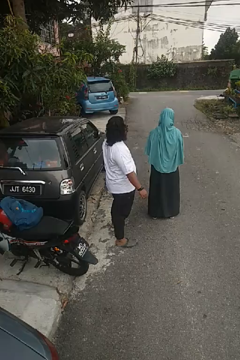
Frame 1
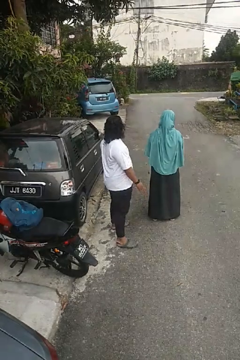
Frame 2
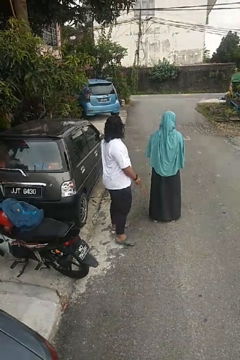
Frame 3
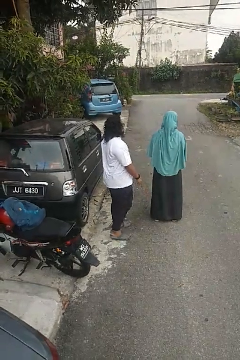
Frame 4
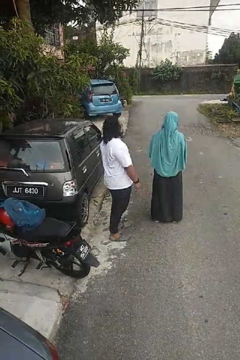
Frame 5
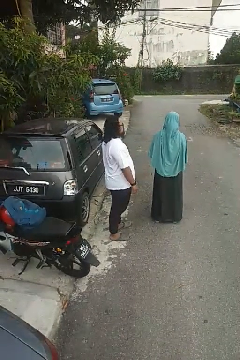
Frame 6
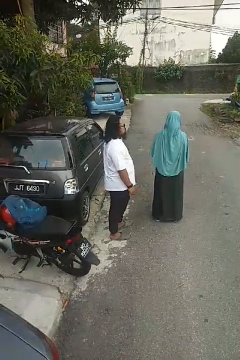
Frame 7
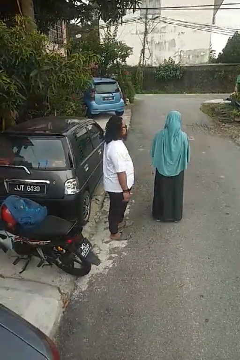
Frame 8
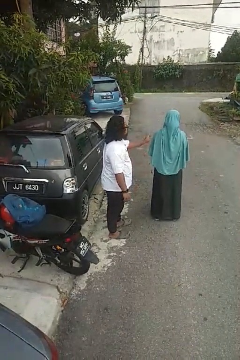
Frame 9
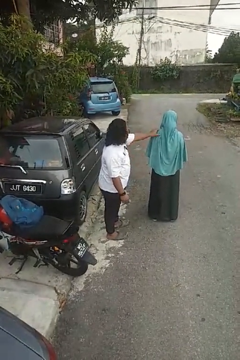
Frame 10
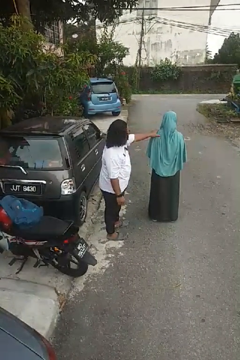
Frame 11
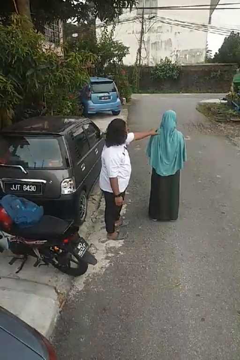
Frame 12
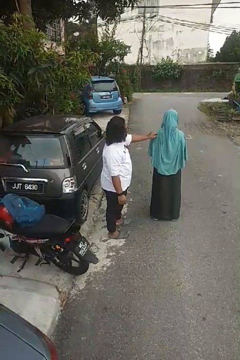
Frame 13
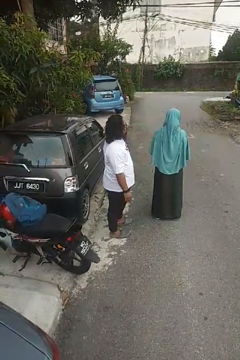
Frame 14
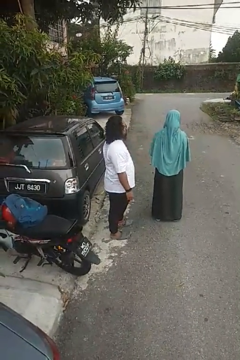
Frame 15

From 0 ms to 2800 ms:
person touches back of person

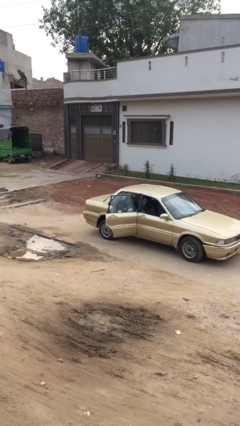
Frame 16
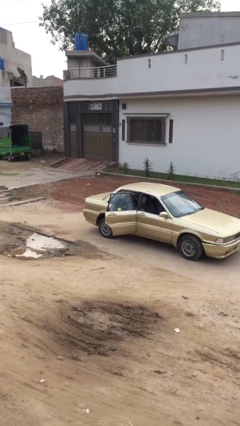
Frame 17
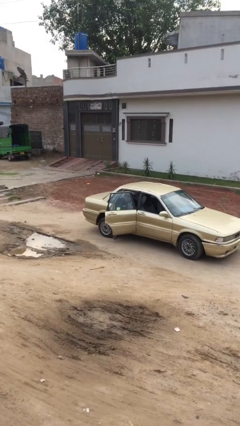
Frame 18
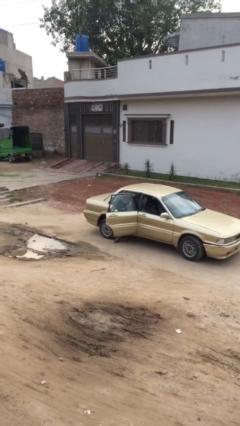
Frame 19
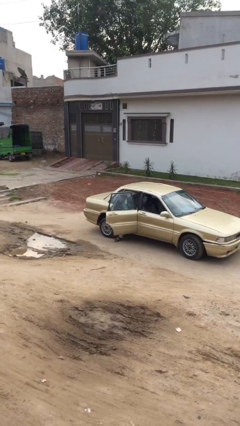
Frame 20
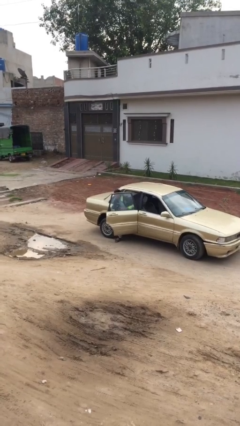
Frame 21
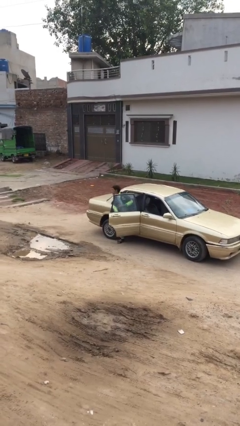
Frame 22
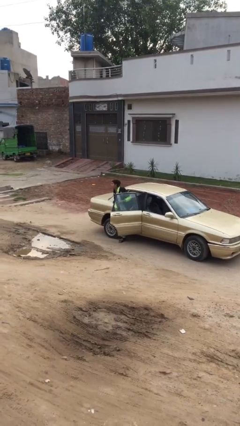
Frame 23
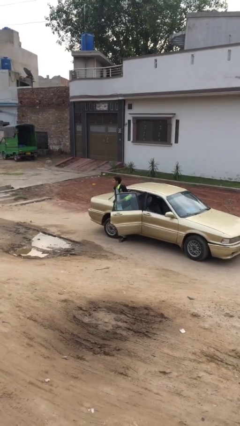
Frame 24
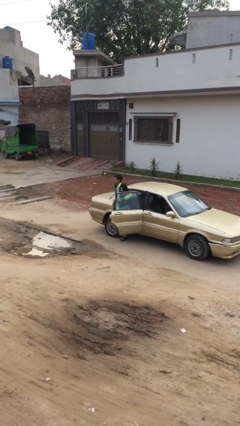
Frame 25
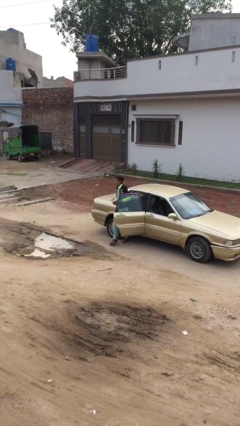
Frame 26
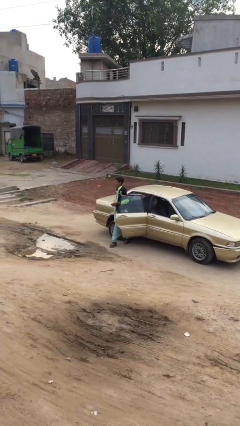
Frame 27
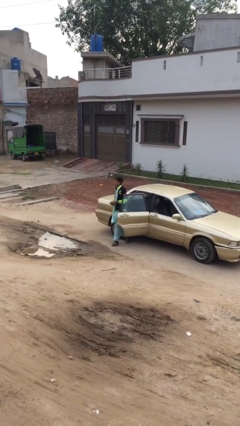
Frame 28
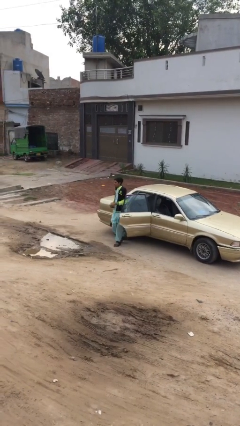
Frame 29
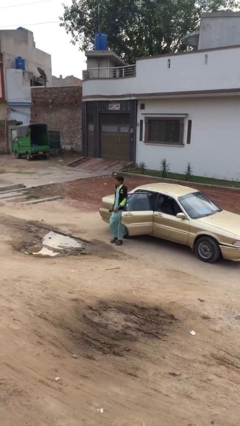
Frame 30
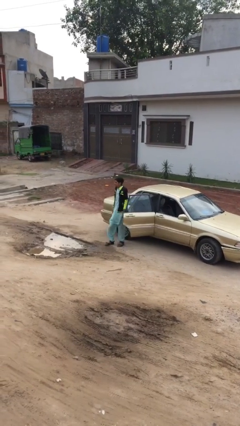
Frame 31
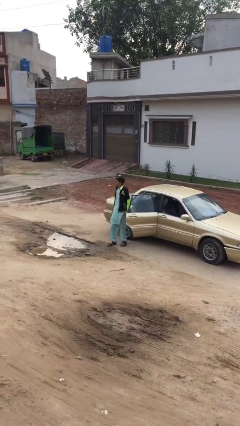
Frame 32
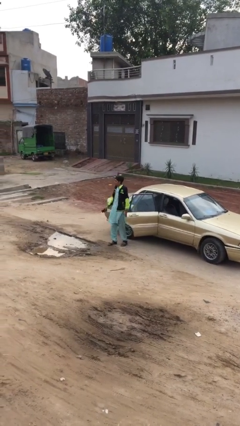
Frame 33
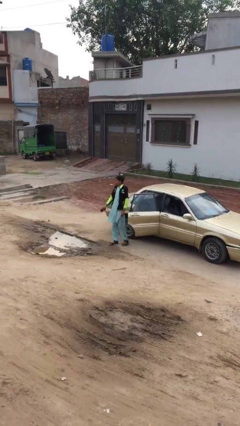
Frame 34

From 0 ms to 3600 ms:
person exits car

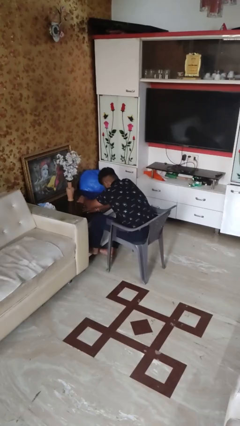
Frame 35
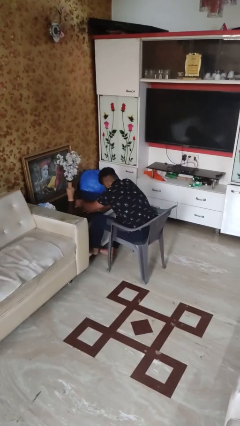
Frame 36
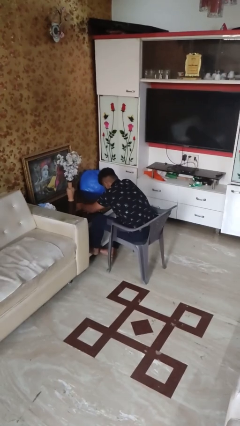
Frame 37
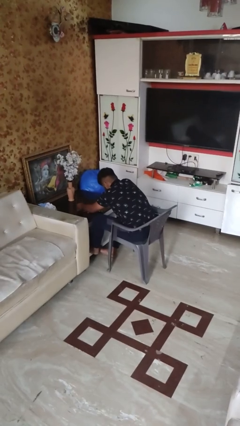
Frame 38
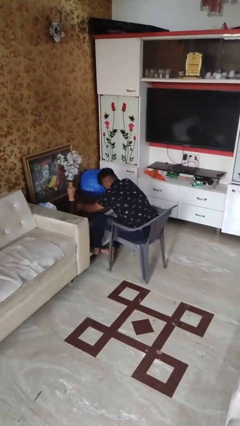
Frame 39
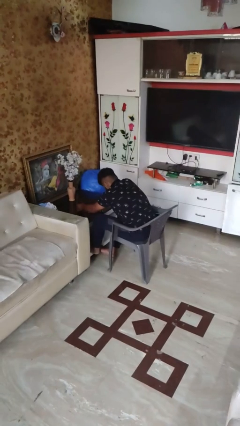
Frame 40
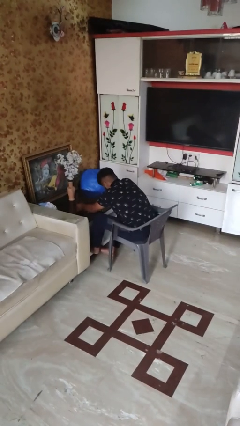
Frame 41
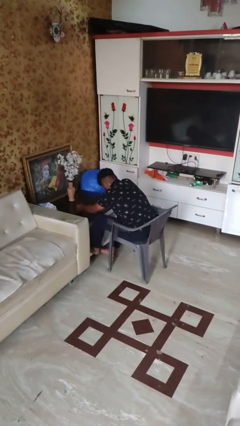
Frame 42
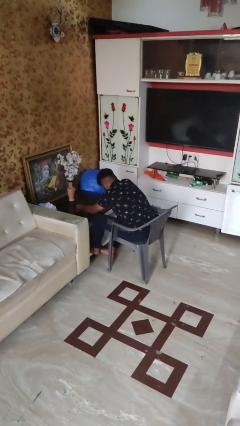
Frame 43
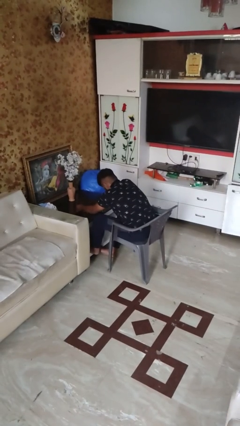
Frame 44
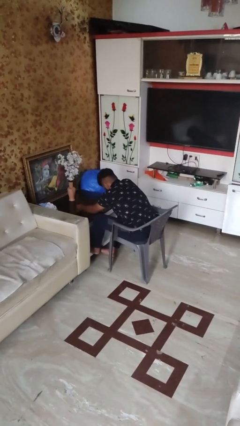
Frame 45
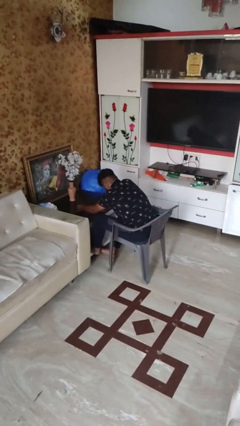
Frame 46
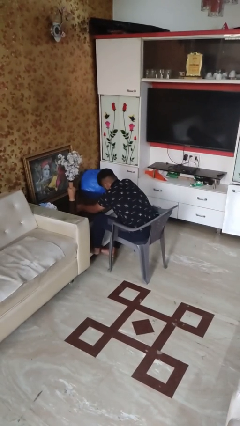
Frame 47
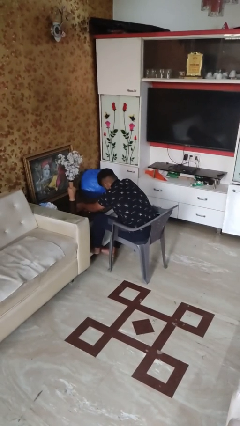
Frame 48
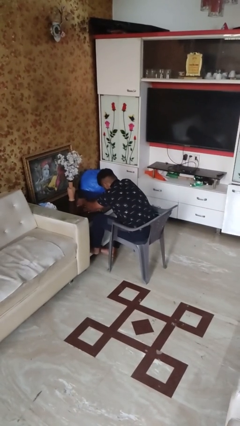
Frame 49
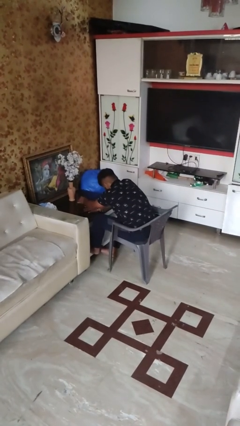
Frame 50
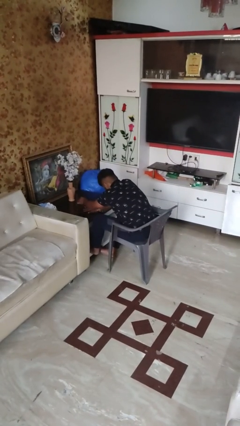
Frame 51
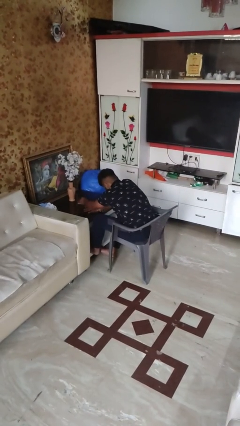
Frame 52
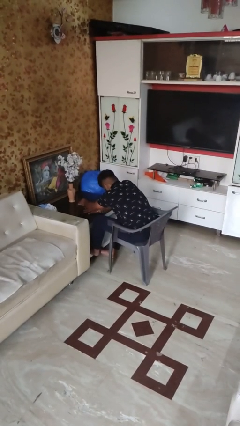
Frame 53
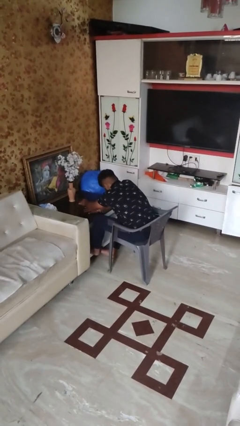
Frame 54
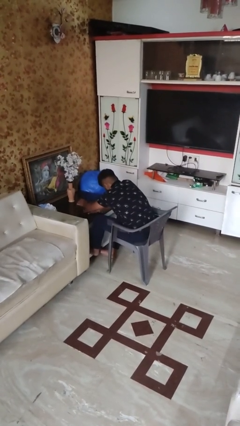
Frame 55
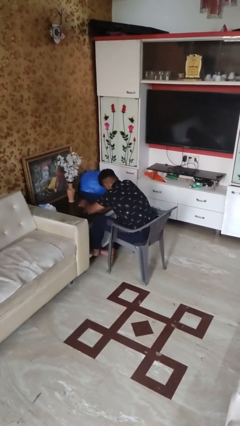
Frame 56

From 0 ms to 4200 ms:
person paints fingernails

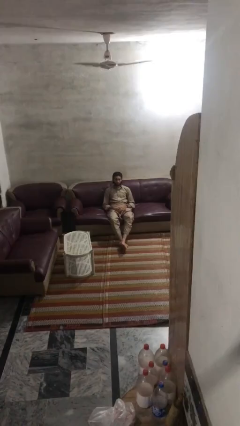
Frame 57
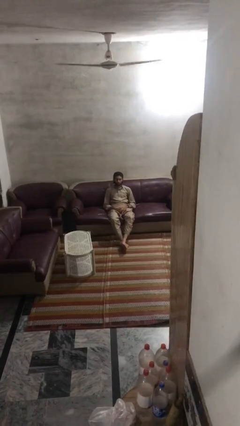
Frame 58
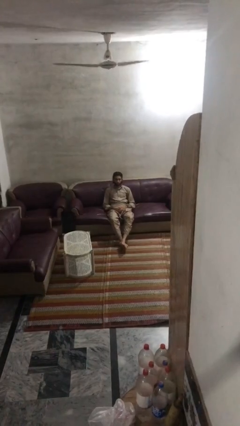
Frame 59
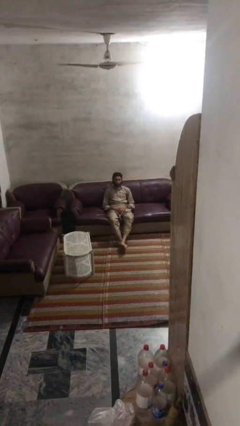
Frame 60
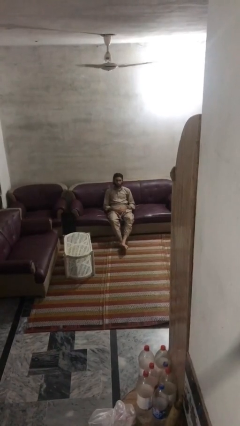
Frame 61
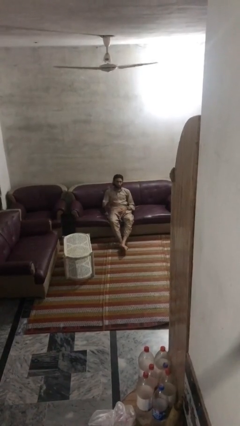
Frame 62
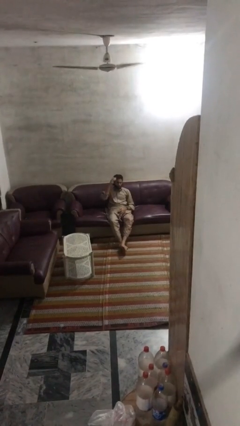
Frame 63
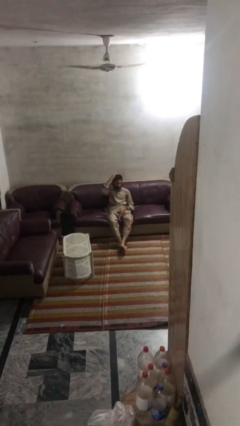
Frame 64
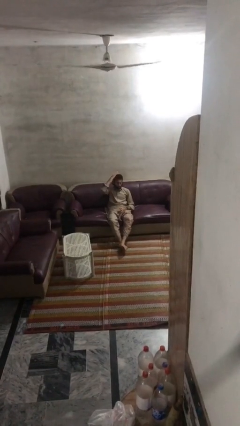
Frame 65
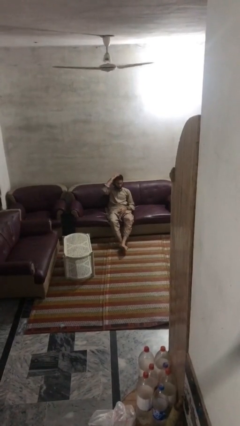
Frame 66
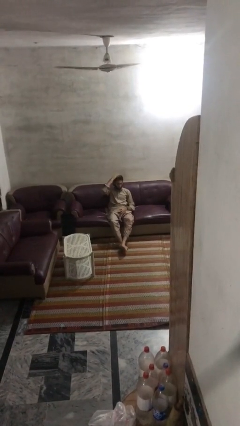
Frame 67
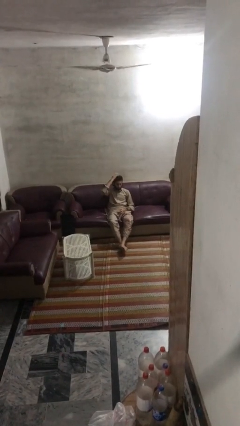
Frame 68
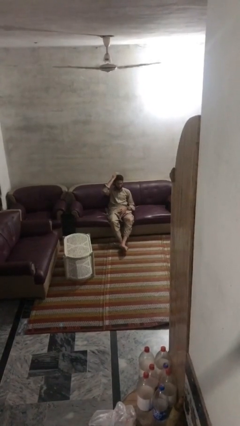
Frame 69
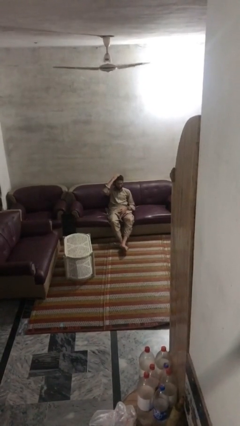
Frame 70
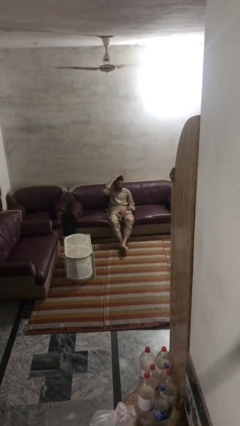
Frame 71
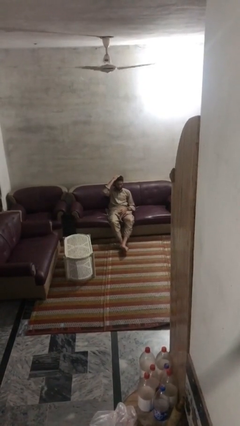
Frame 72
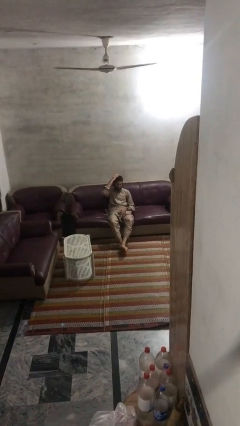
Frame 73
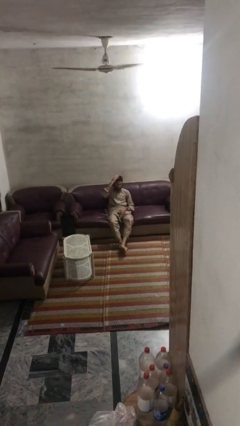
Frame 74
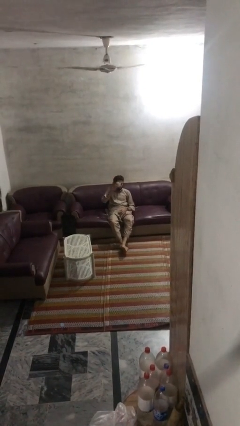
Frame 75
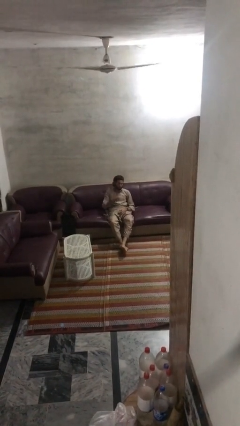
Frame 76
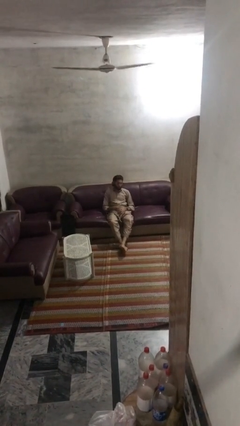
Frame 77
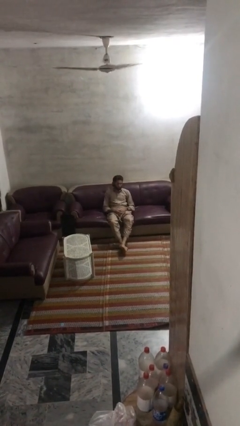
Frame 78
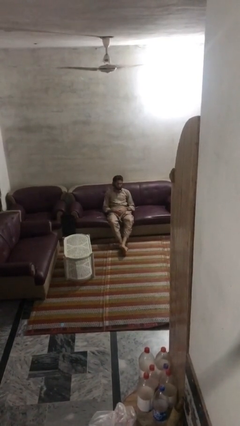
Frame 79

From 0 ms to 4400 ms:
person pats head

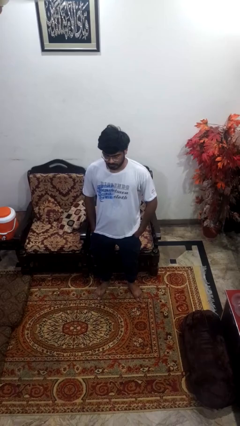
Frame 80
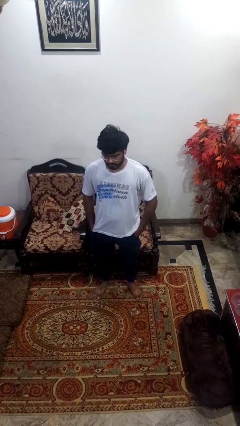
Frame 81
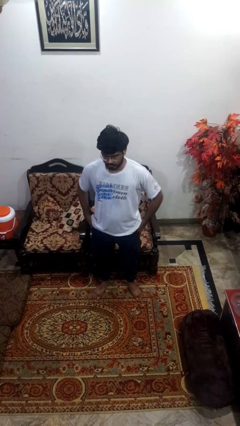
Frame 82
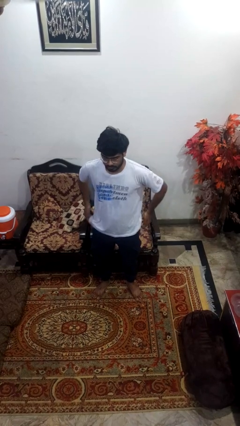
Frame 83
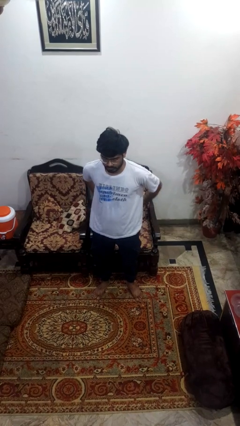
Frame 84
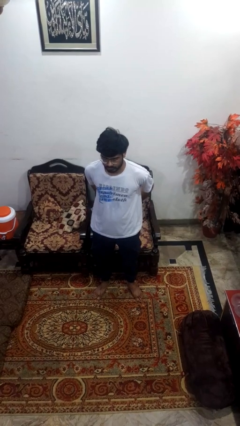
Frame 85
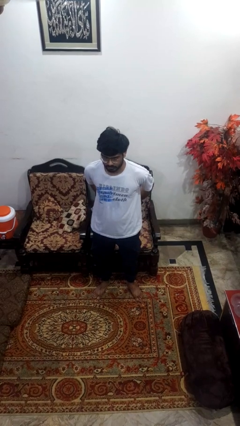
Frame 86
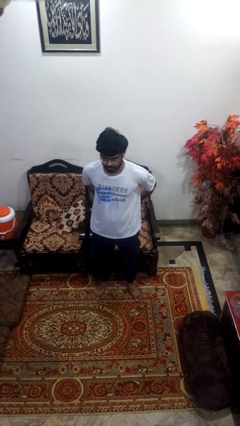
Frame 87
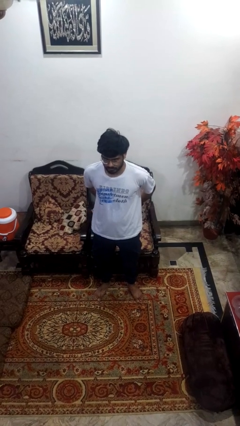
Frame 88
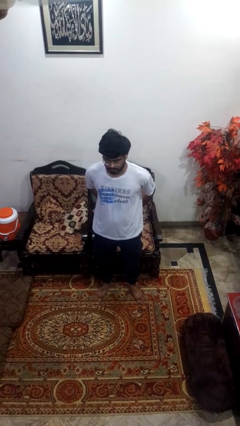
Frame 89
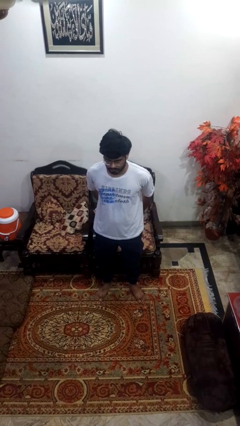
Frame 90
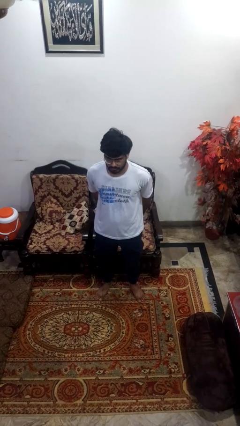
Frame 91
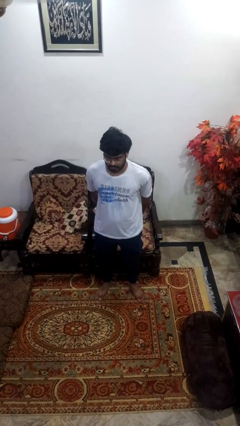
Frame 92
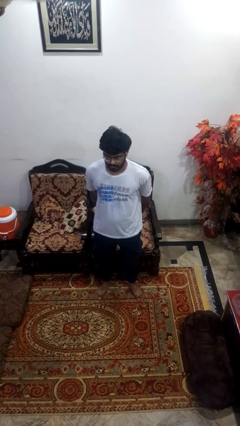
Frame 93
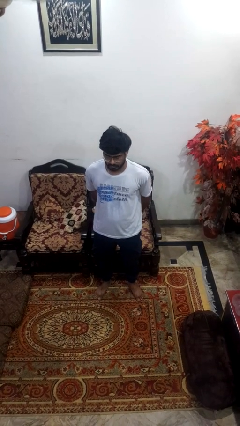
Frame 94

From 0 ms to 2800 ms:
person puts hands in back pockets

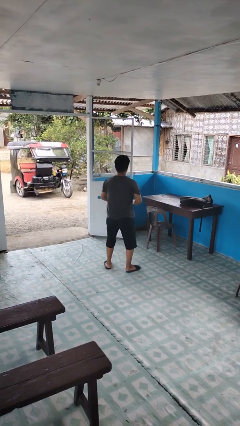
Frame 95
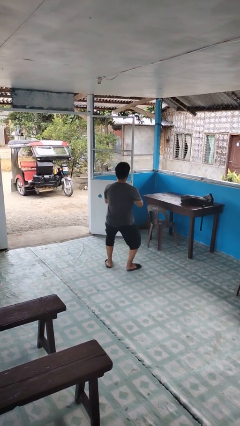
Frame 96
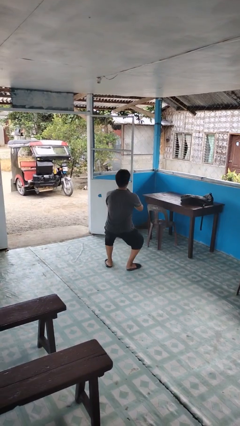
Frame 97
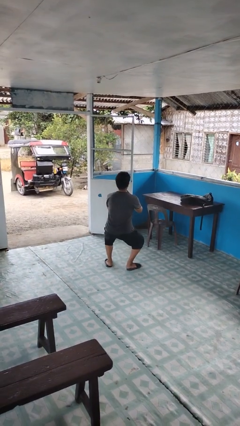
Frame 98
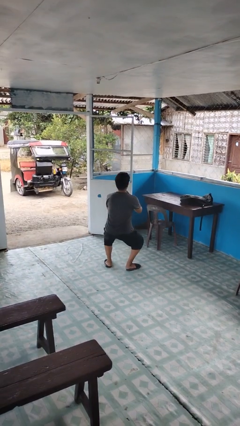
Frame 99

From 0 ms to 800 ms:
person squats
